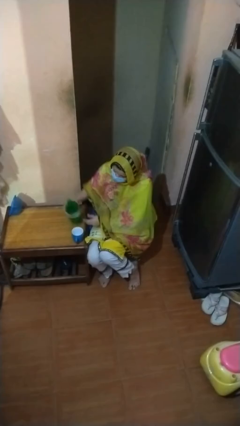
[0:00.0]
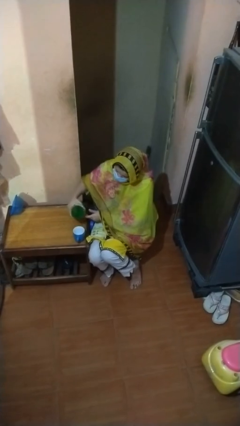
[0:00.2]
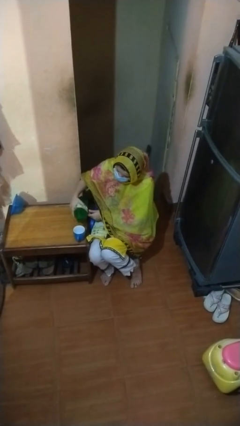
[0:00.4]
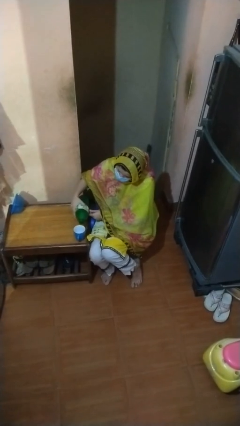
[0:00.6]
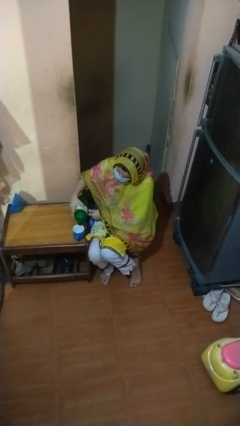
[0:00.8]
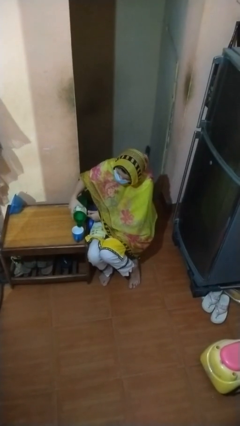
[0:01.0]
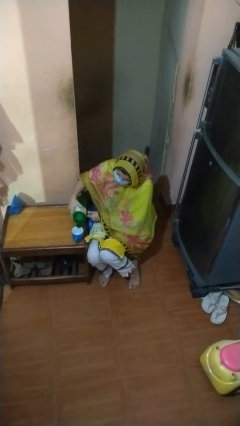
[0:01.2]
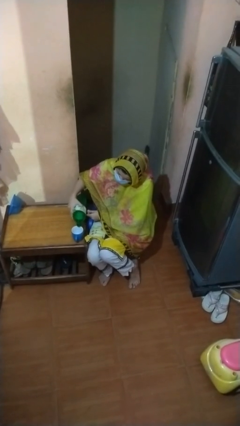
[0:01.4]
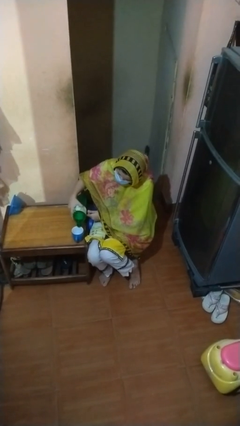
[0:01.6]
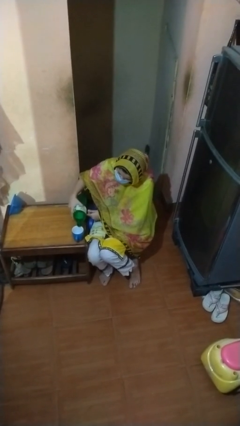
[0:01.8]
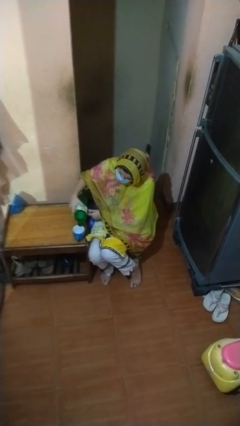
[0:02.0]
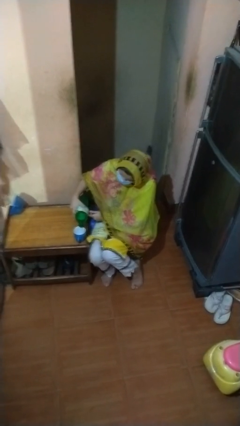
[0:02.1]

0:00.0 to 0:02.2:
person pours liquid into cup

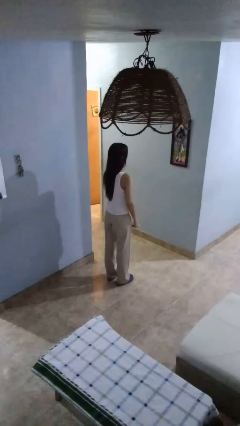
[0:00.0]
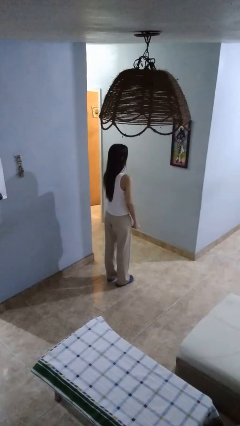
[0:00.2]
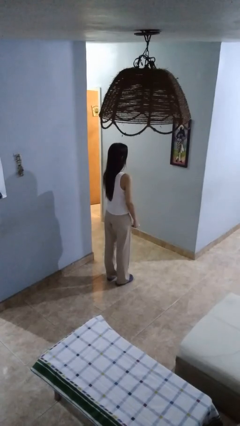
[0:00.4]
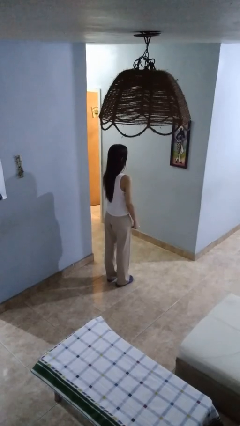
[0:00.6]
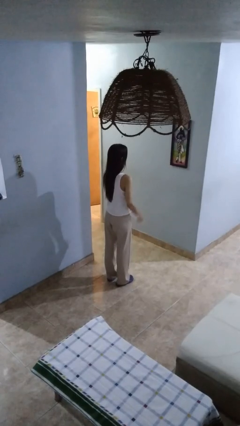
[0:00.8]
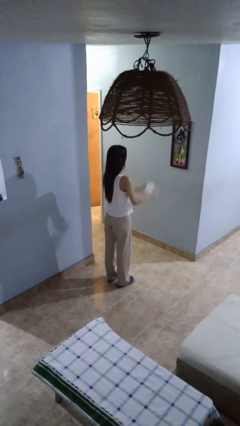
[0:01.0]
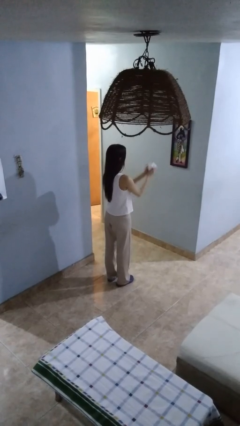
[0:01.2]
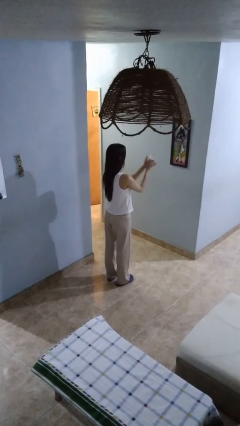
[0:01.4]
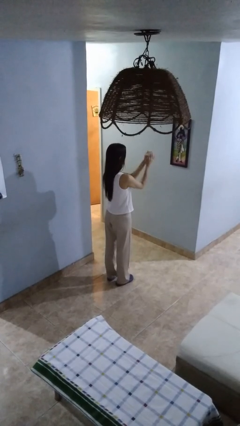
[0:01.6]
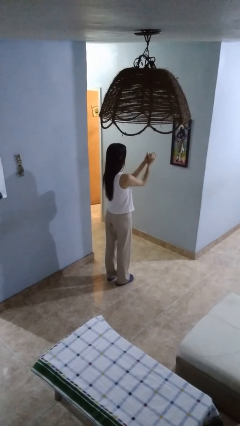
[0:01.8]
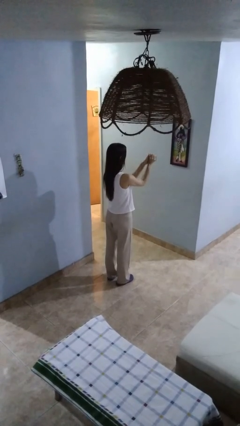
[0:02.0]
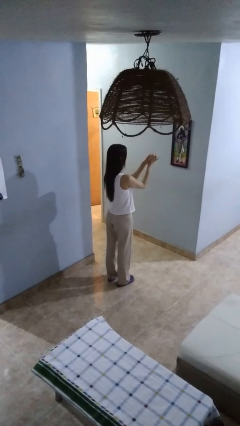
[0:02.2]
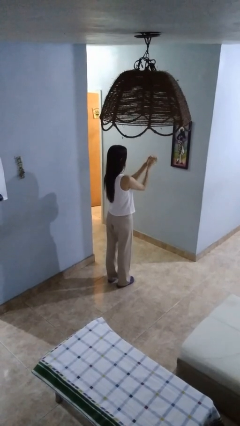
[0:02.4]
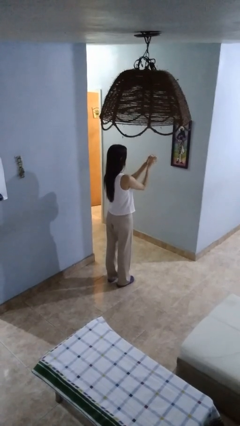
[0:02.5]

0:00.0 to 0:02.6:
person crumples paper

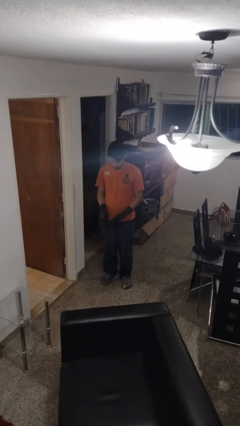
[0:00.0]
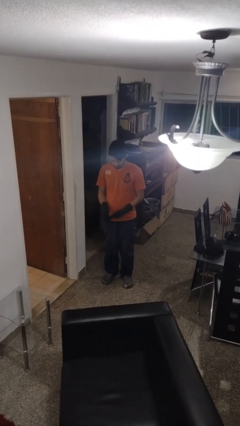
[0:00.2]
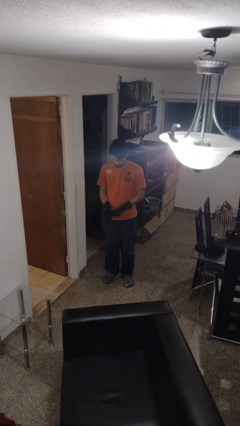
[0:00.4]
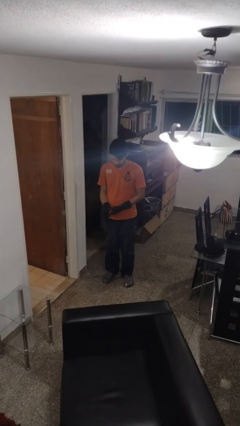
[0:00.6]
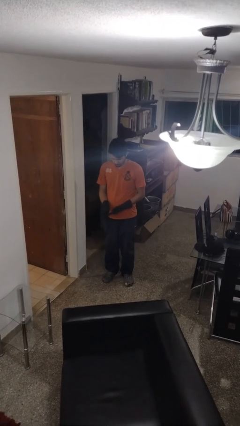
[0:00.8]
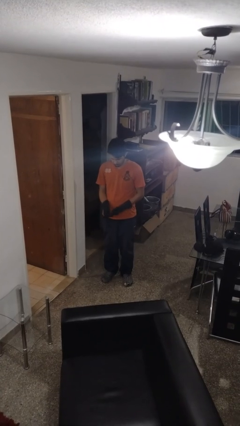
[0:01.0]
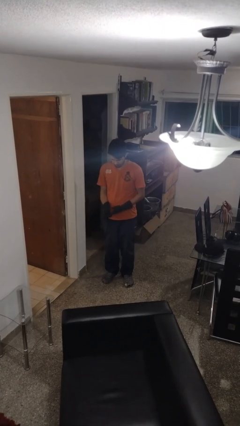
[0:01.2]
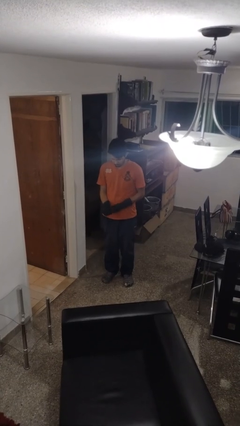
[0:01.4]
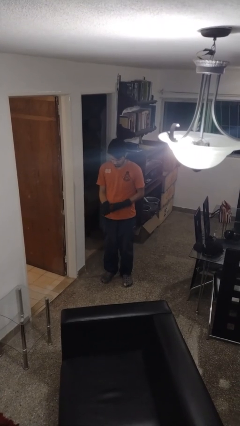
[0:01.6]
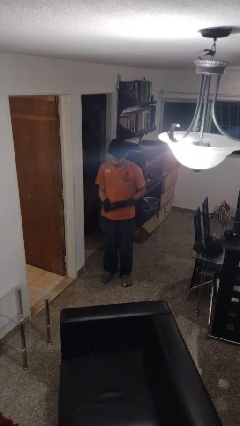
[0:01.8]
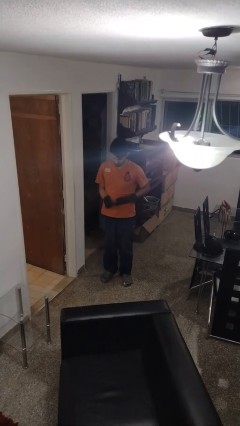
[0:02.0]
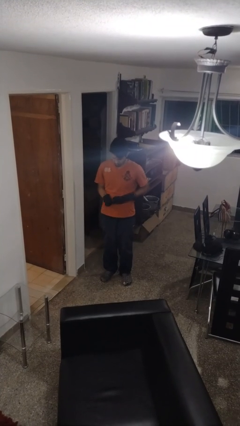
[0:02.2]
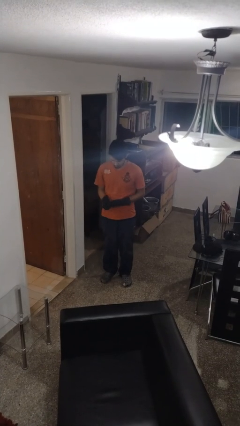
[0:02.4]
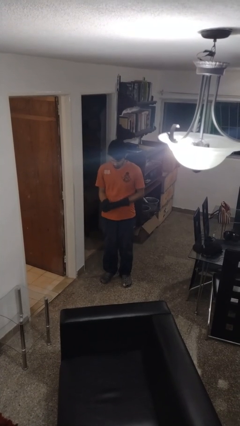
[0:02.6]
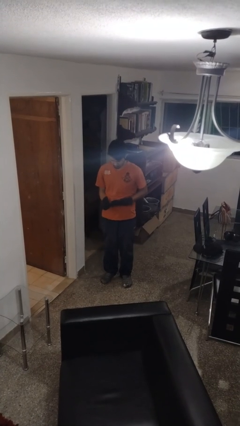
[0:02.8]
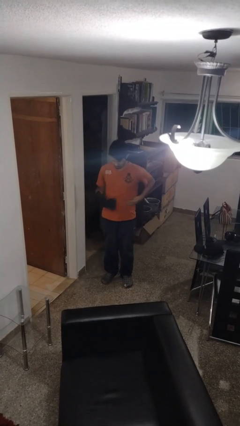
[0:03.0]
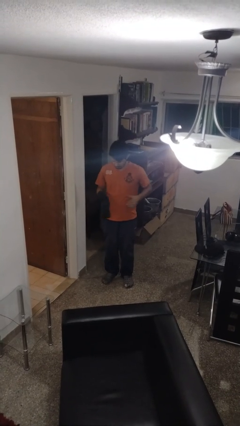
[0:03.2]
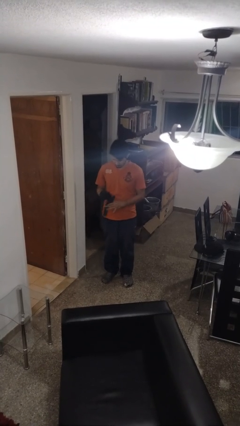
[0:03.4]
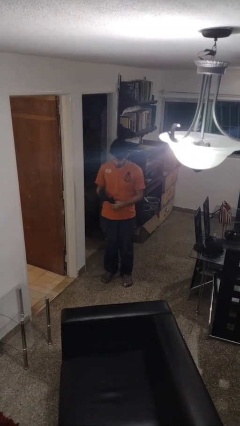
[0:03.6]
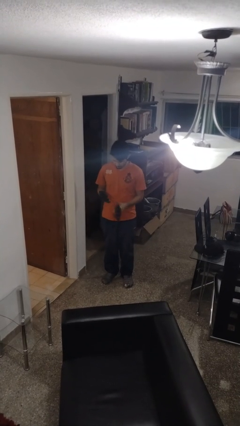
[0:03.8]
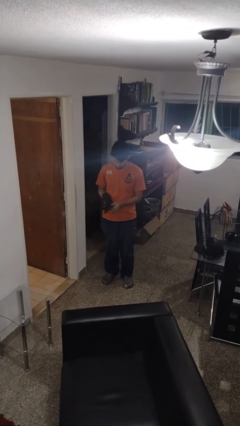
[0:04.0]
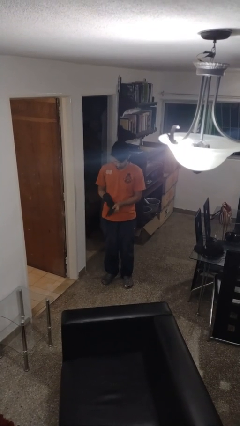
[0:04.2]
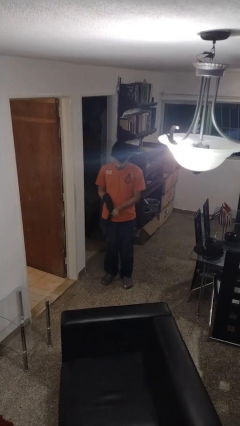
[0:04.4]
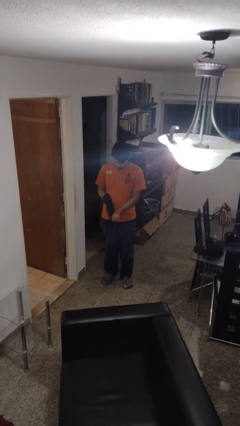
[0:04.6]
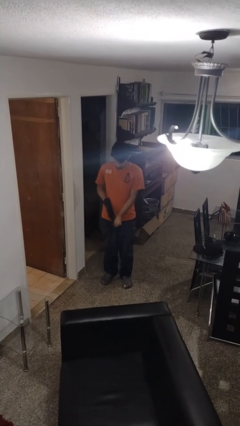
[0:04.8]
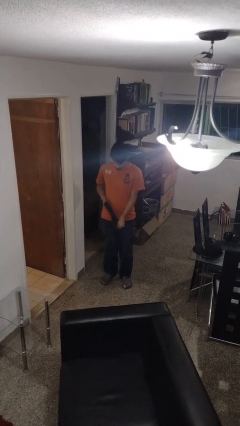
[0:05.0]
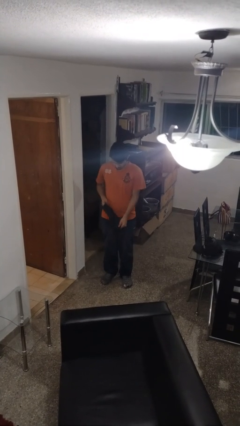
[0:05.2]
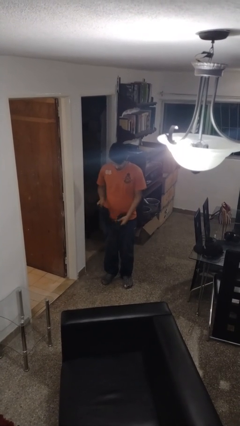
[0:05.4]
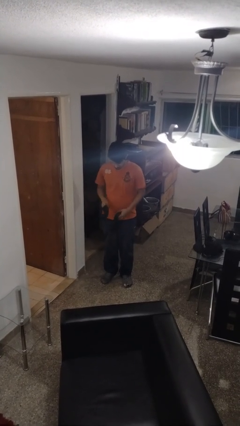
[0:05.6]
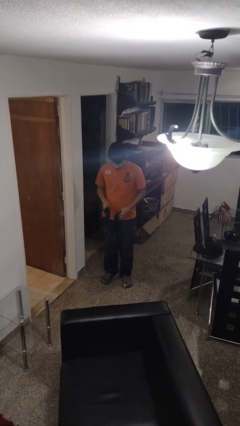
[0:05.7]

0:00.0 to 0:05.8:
person takes off gloves

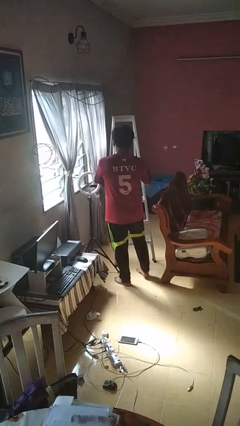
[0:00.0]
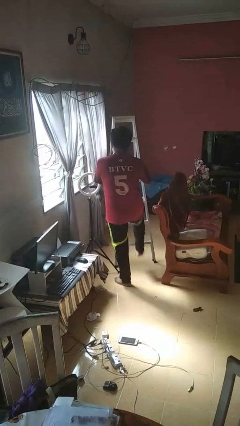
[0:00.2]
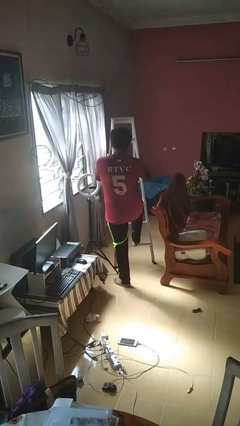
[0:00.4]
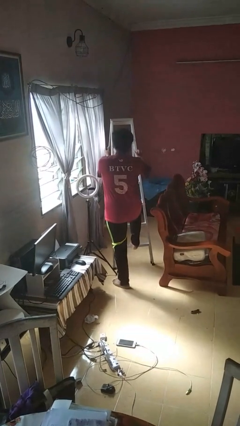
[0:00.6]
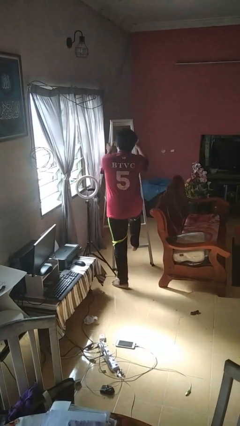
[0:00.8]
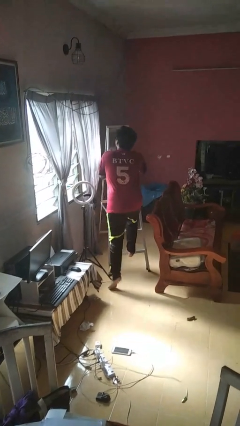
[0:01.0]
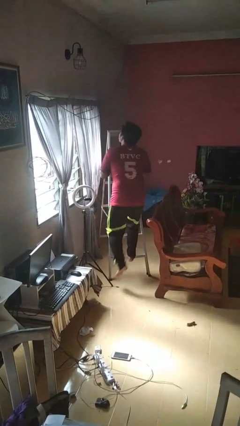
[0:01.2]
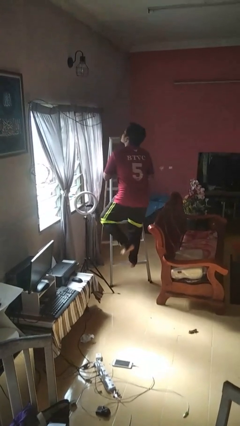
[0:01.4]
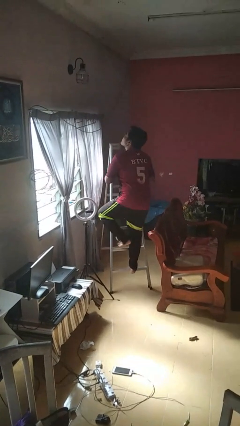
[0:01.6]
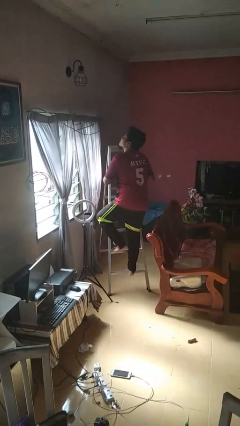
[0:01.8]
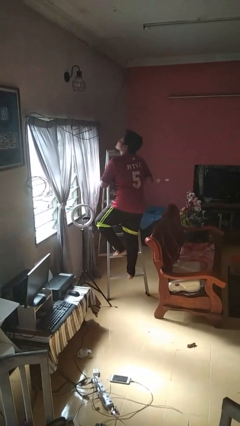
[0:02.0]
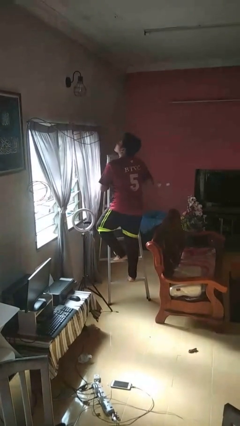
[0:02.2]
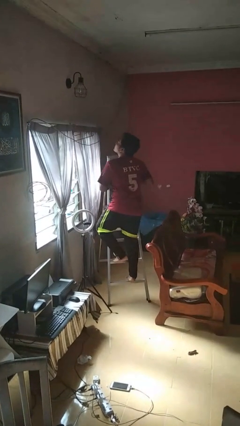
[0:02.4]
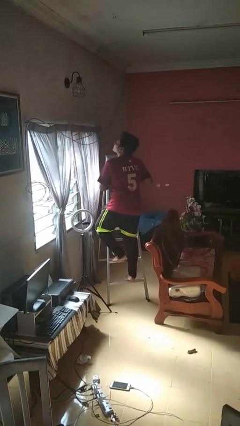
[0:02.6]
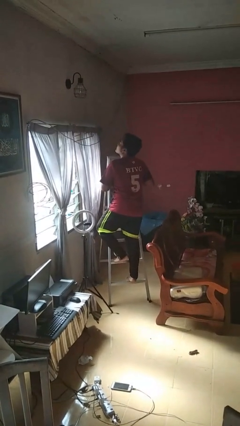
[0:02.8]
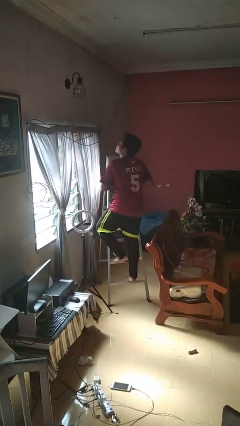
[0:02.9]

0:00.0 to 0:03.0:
person climbs up ladder

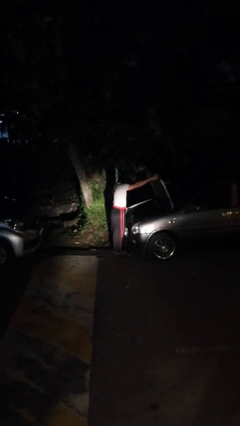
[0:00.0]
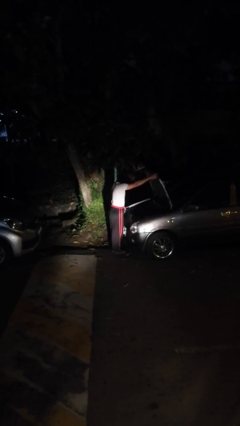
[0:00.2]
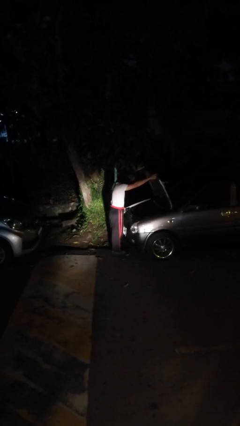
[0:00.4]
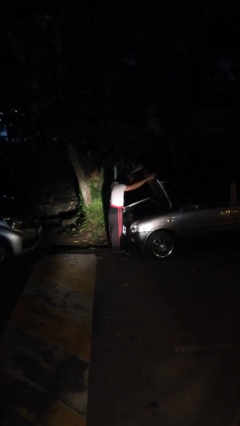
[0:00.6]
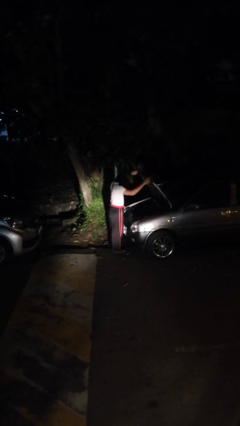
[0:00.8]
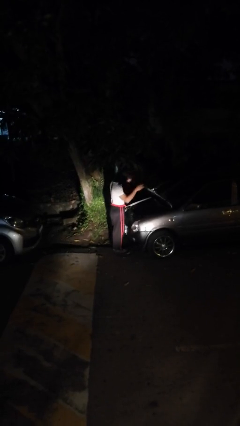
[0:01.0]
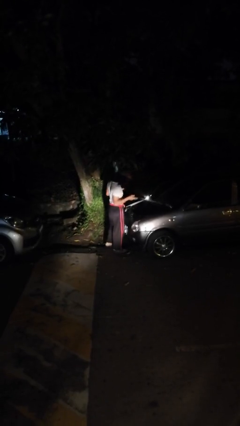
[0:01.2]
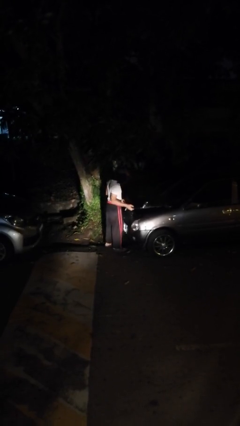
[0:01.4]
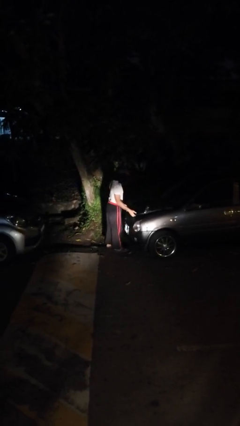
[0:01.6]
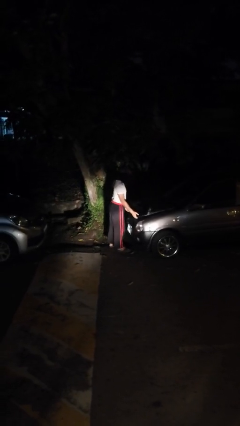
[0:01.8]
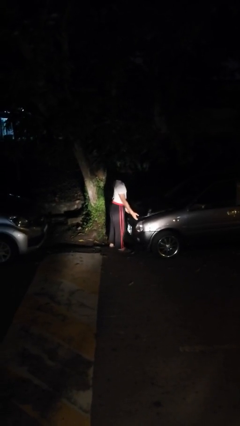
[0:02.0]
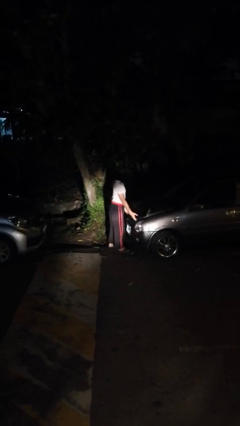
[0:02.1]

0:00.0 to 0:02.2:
person closes car hood

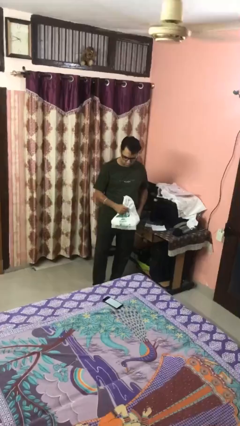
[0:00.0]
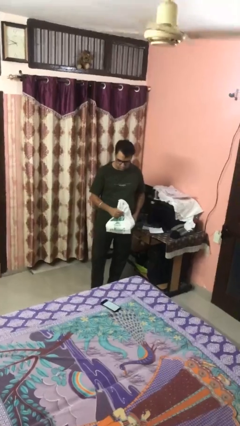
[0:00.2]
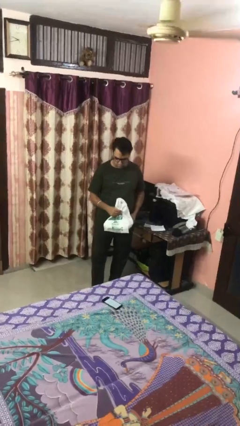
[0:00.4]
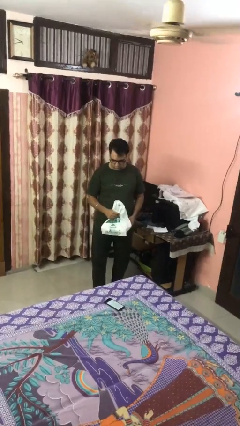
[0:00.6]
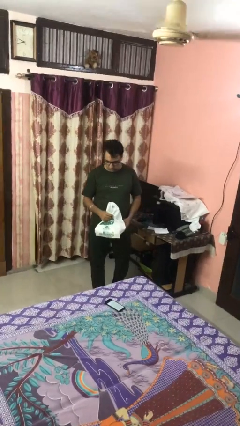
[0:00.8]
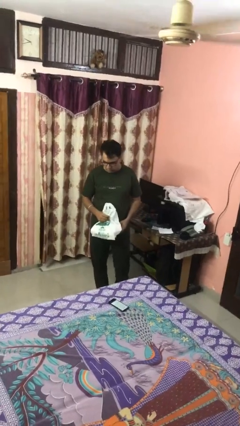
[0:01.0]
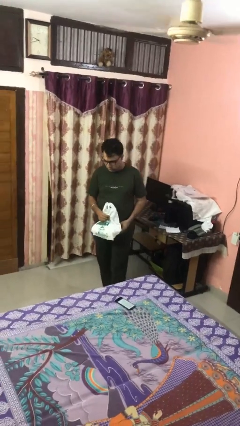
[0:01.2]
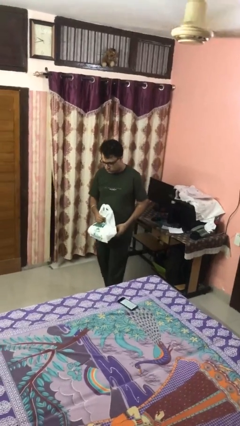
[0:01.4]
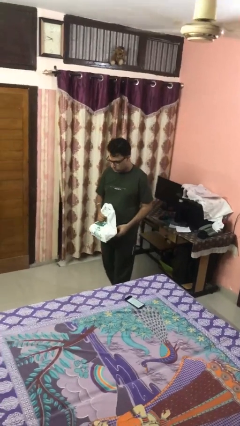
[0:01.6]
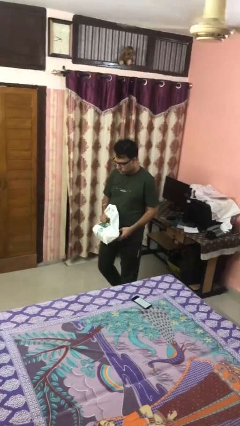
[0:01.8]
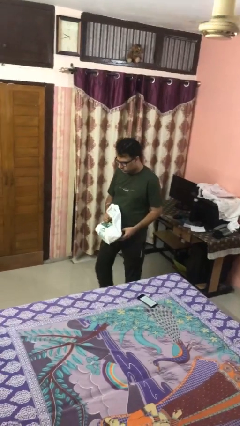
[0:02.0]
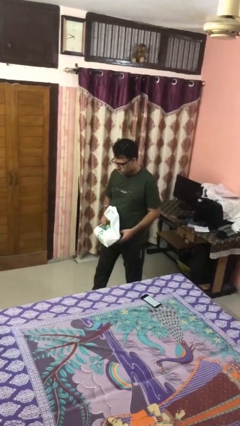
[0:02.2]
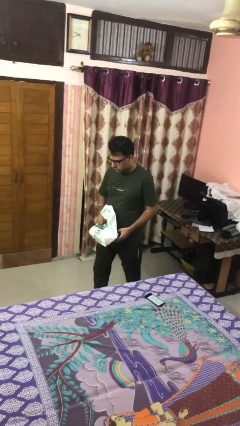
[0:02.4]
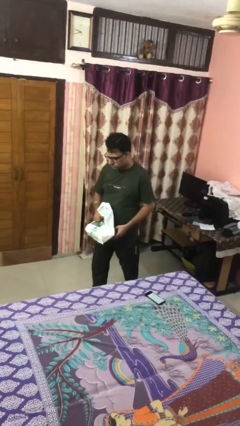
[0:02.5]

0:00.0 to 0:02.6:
person carries groceries
